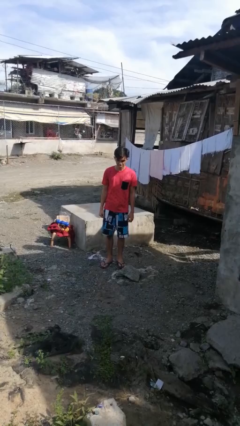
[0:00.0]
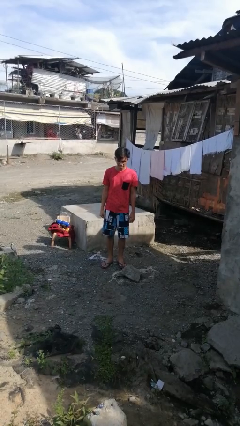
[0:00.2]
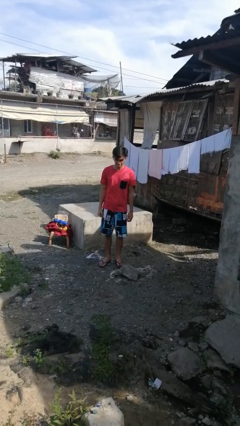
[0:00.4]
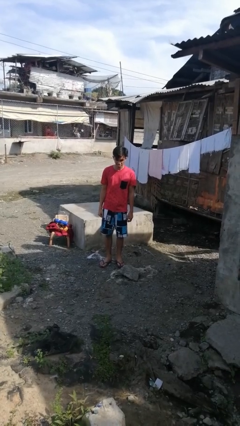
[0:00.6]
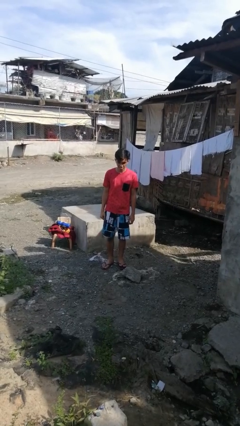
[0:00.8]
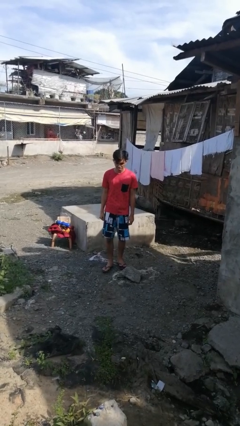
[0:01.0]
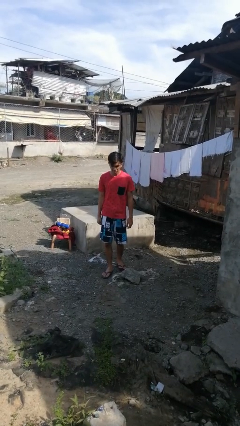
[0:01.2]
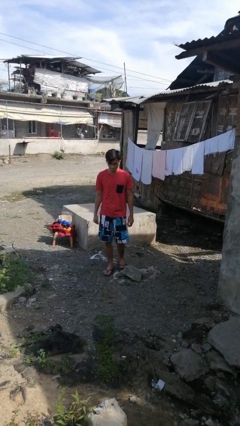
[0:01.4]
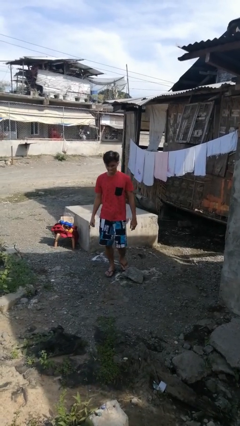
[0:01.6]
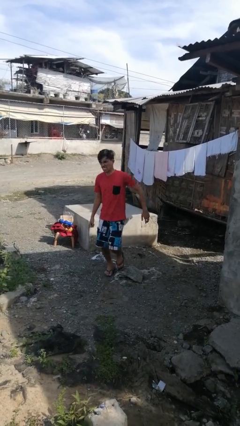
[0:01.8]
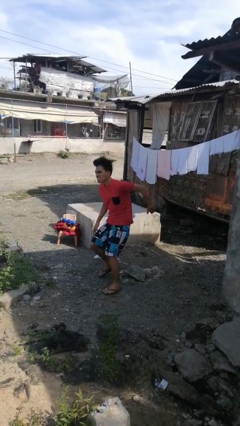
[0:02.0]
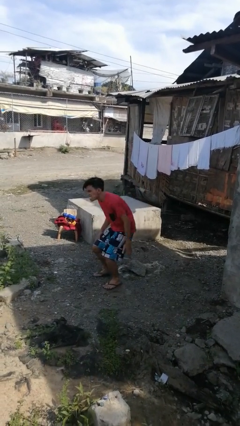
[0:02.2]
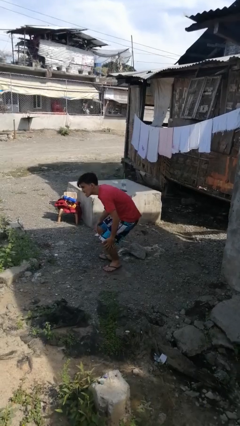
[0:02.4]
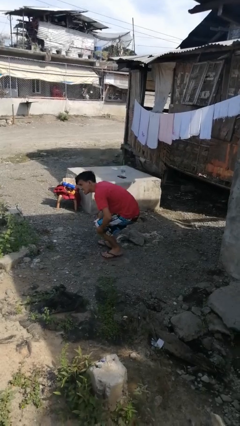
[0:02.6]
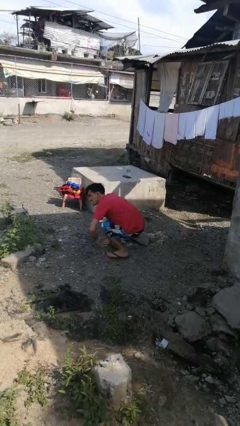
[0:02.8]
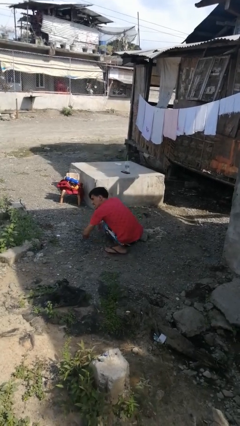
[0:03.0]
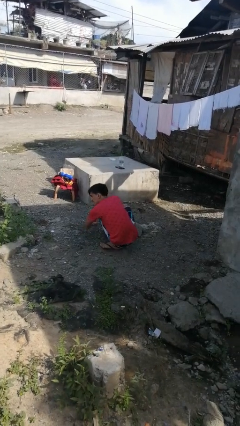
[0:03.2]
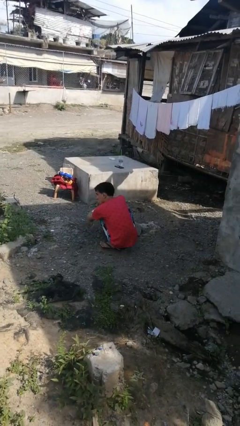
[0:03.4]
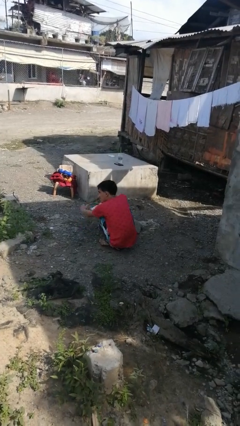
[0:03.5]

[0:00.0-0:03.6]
person trips on object on floor

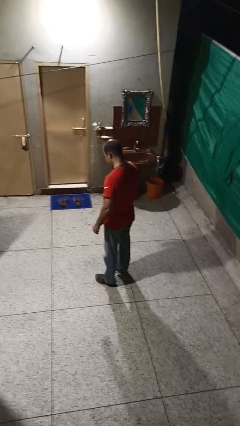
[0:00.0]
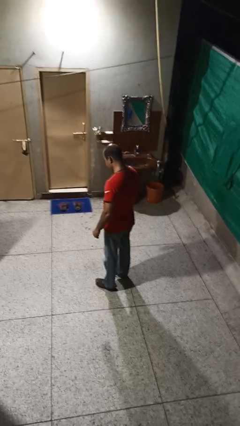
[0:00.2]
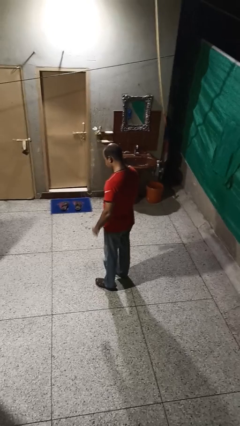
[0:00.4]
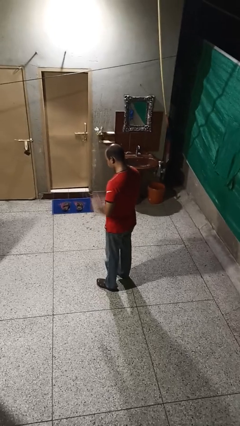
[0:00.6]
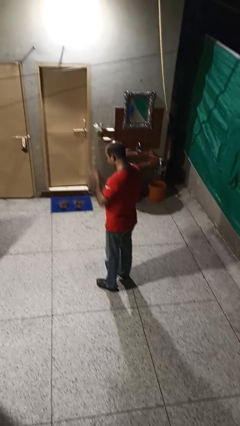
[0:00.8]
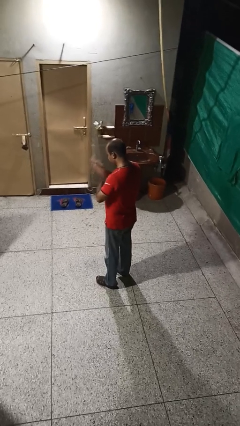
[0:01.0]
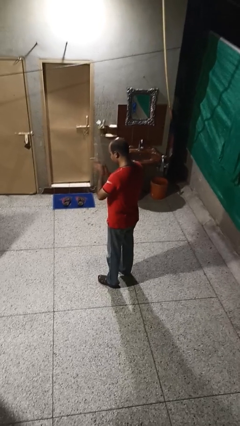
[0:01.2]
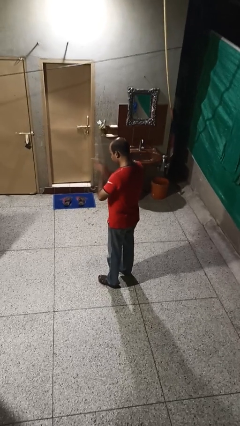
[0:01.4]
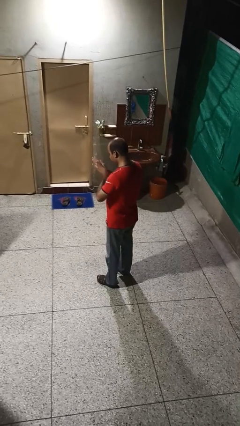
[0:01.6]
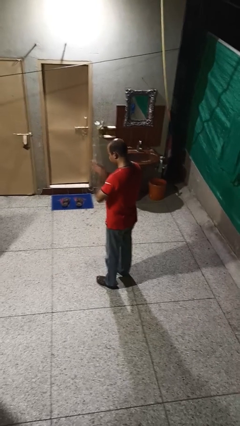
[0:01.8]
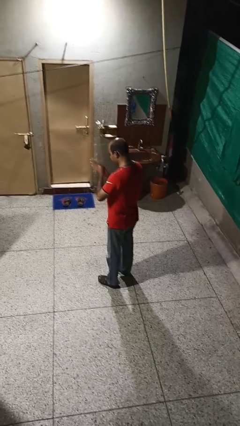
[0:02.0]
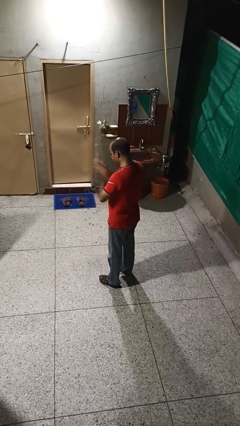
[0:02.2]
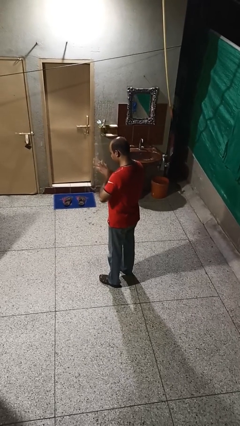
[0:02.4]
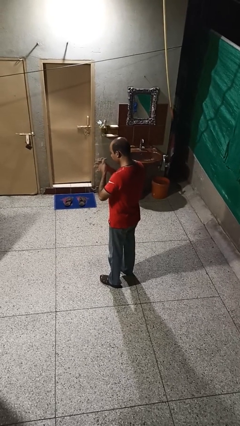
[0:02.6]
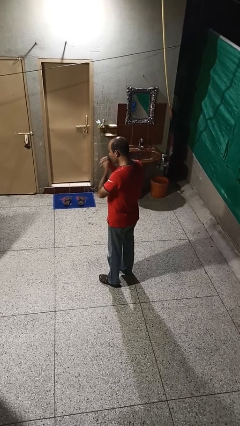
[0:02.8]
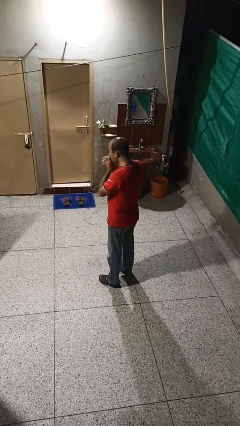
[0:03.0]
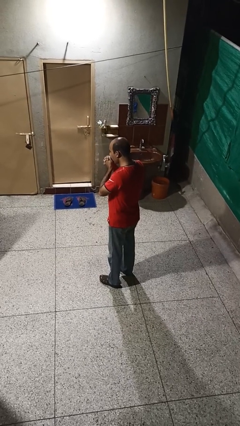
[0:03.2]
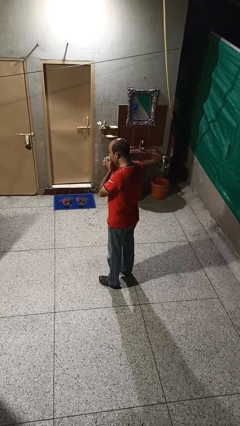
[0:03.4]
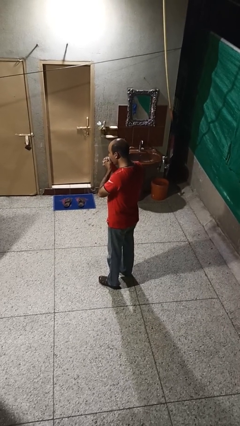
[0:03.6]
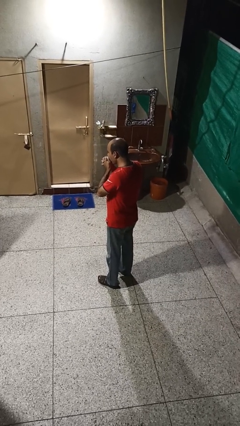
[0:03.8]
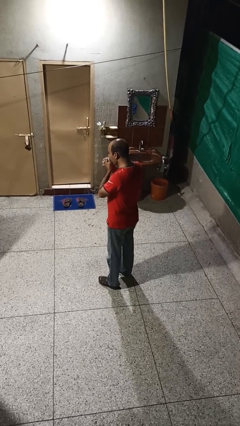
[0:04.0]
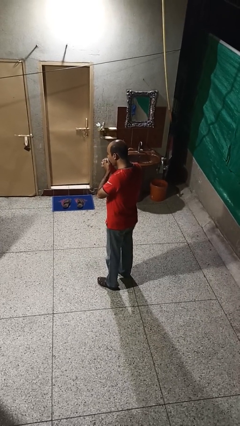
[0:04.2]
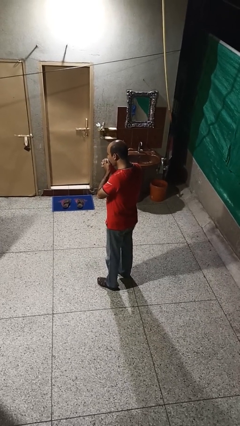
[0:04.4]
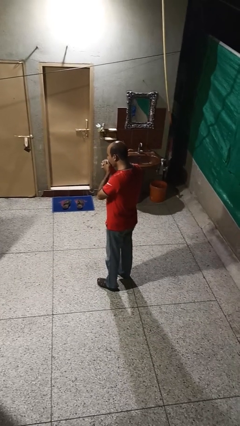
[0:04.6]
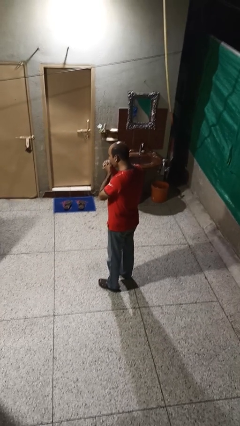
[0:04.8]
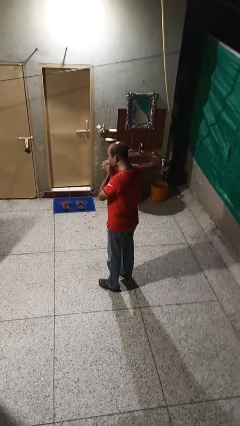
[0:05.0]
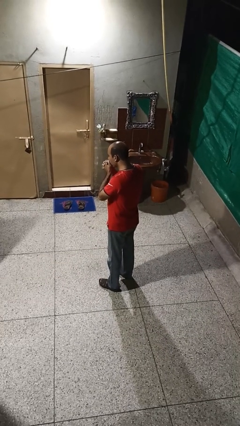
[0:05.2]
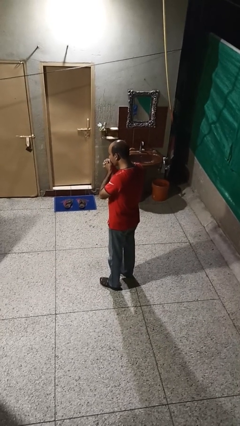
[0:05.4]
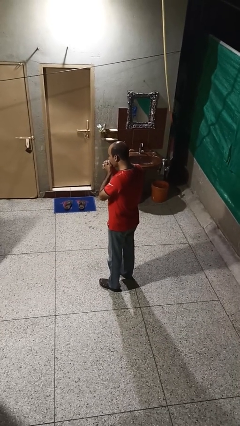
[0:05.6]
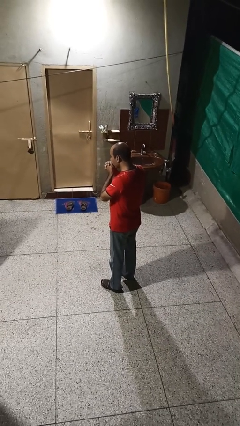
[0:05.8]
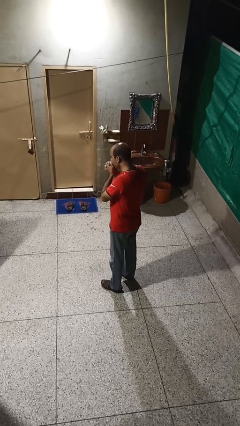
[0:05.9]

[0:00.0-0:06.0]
person blows into hands

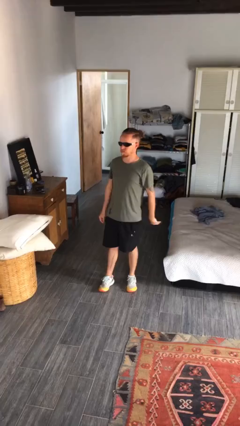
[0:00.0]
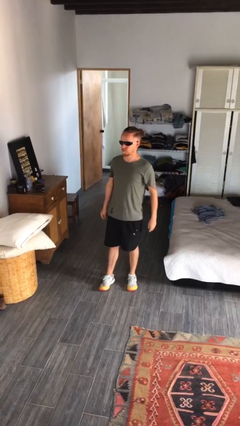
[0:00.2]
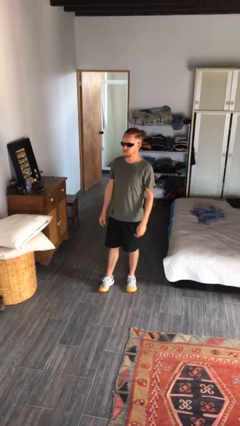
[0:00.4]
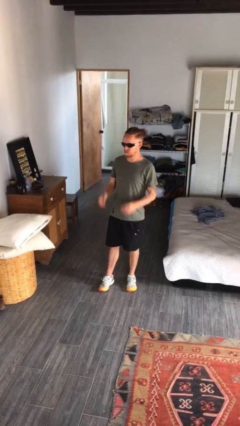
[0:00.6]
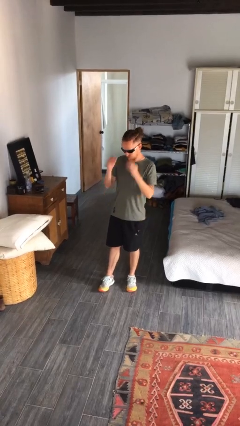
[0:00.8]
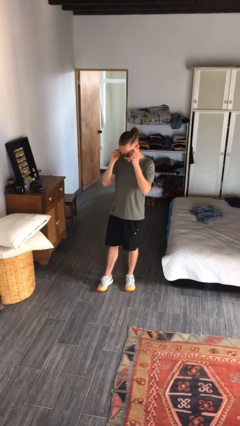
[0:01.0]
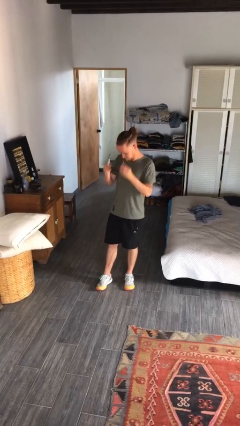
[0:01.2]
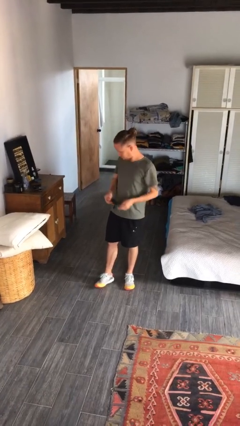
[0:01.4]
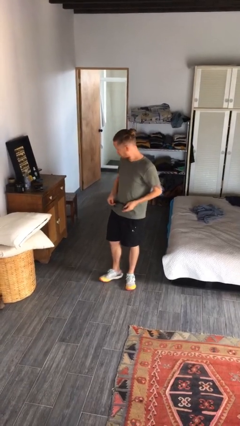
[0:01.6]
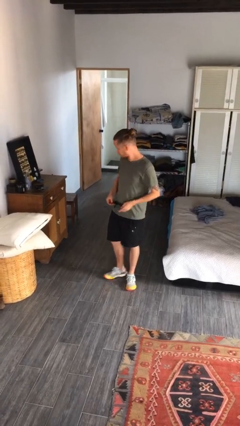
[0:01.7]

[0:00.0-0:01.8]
person takes off sunglasses

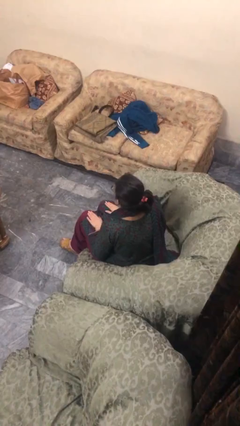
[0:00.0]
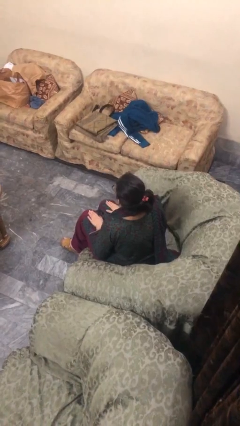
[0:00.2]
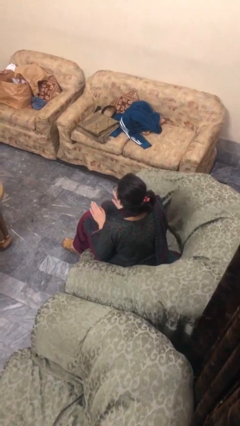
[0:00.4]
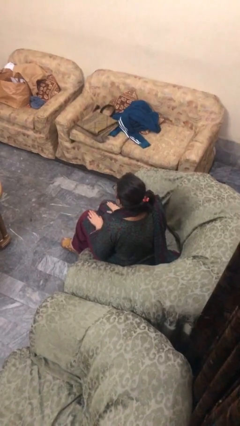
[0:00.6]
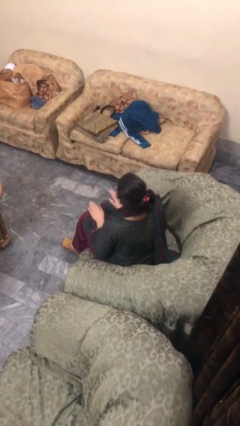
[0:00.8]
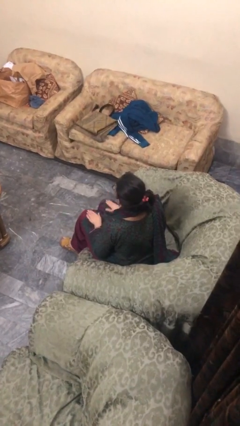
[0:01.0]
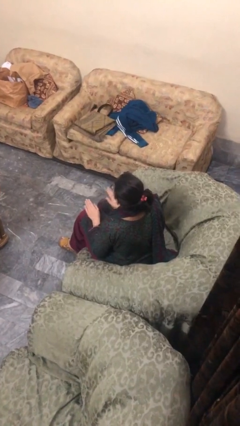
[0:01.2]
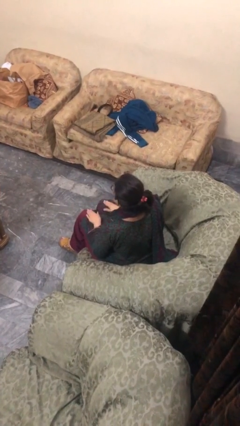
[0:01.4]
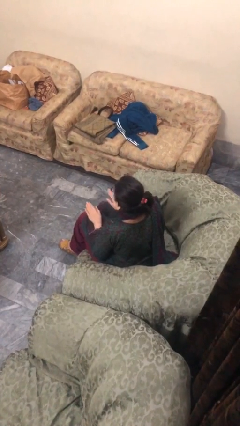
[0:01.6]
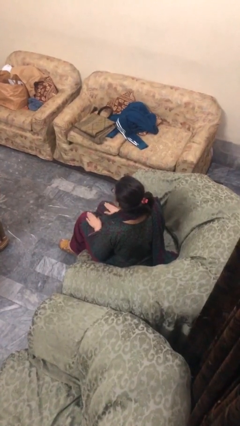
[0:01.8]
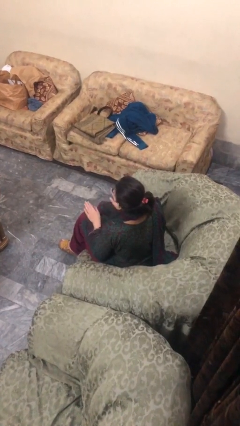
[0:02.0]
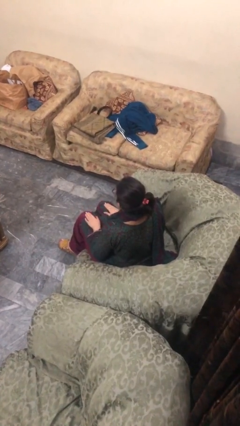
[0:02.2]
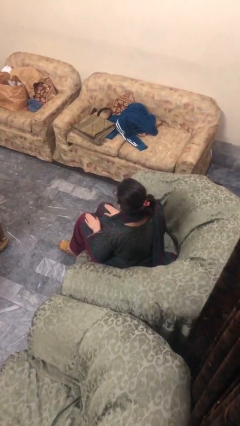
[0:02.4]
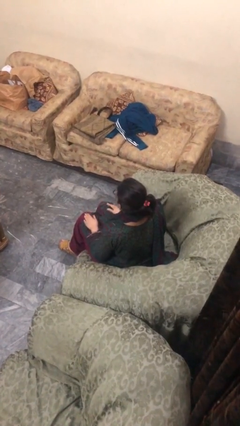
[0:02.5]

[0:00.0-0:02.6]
person slaps hands on thighs

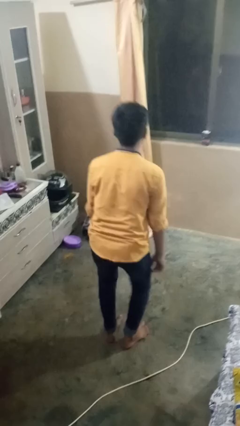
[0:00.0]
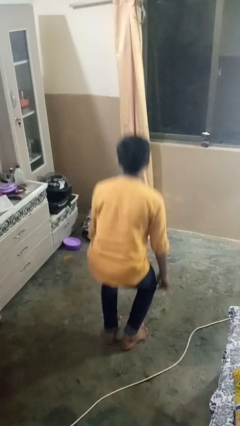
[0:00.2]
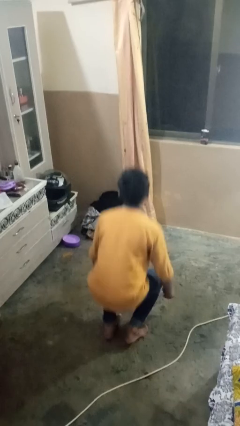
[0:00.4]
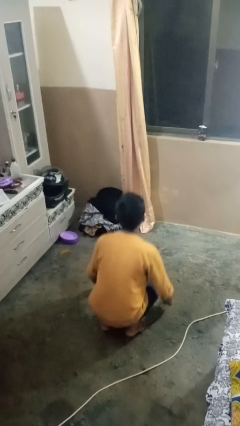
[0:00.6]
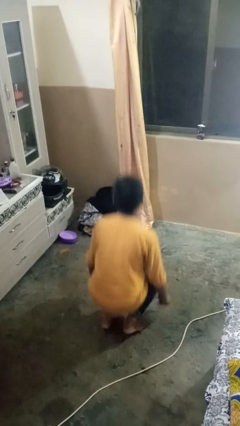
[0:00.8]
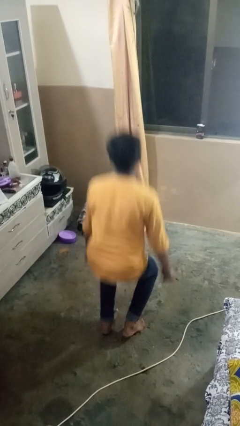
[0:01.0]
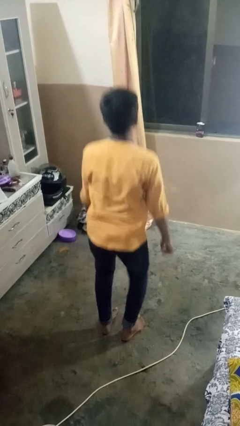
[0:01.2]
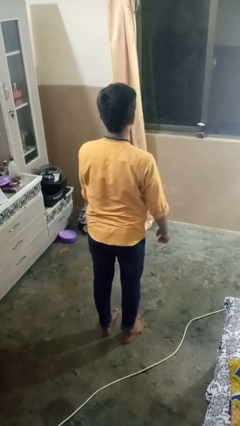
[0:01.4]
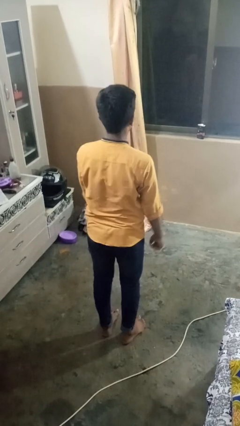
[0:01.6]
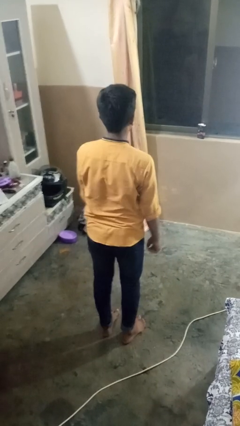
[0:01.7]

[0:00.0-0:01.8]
person exercises with situp

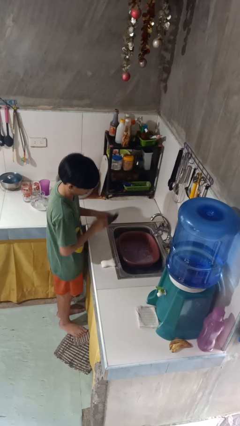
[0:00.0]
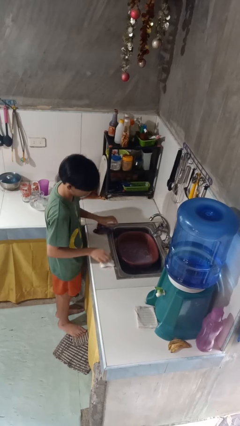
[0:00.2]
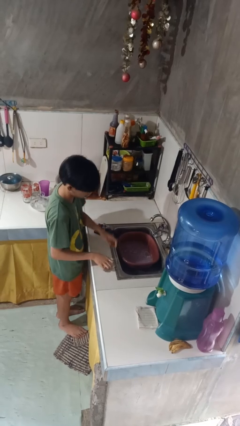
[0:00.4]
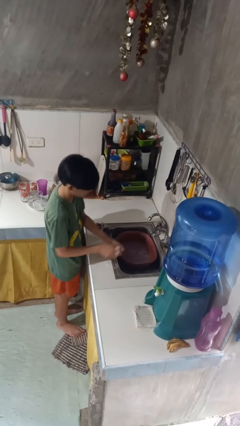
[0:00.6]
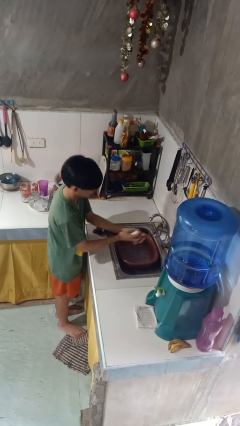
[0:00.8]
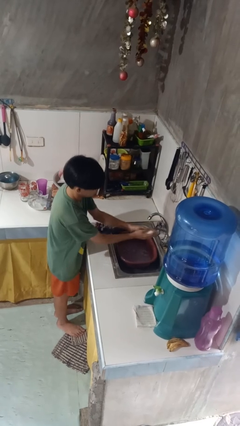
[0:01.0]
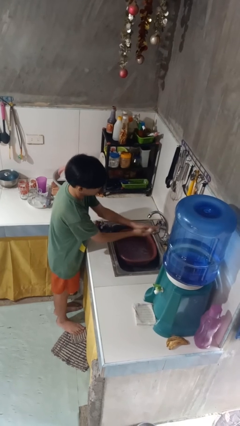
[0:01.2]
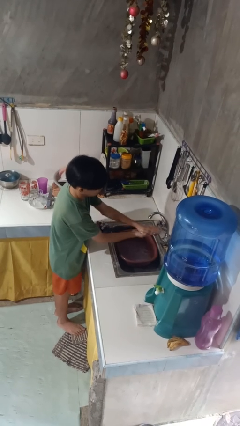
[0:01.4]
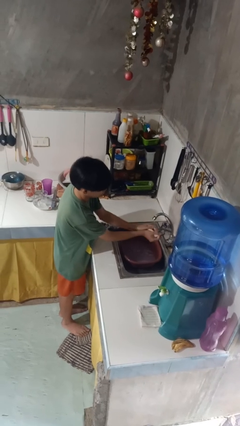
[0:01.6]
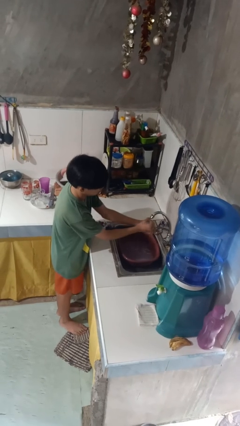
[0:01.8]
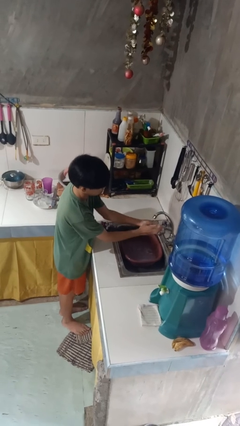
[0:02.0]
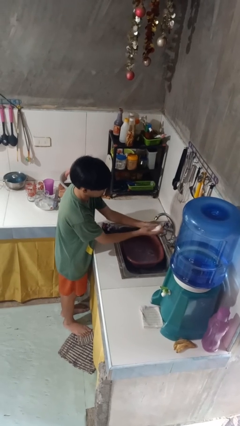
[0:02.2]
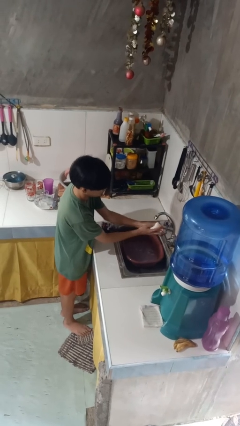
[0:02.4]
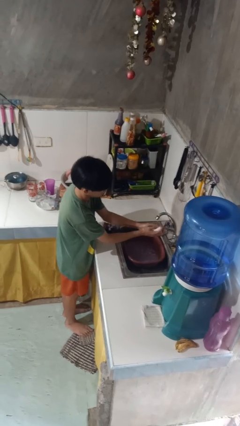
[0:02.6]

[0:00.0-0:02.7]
person washes hands
